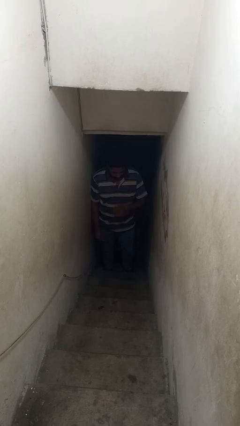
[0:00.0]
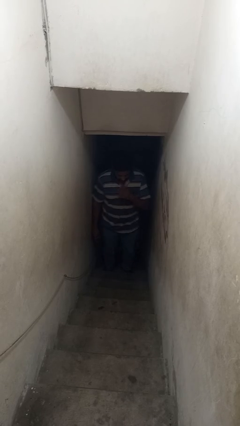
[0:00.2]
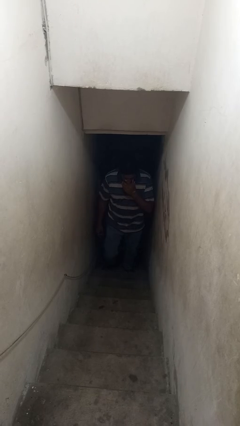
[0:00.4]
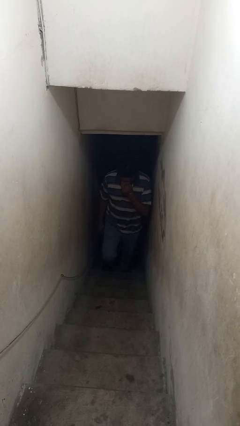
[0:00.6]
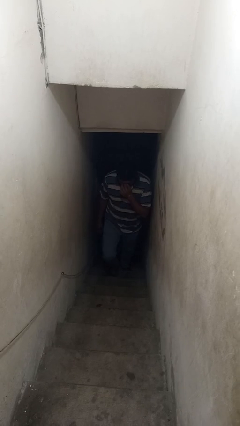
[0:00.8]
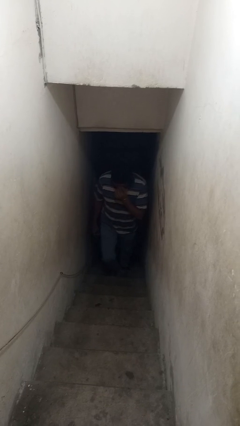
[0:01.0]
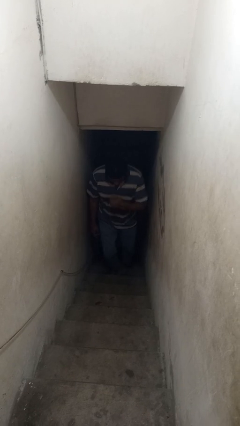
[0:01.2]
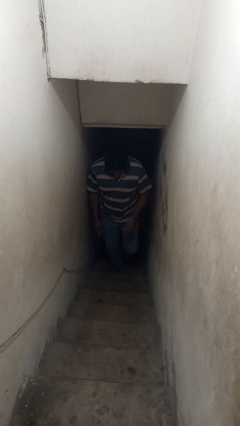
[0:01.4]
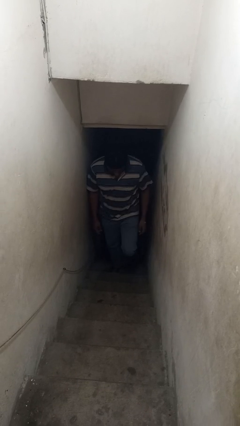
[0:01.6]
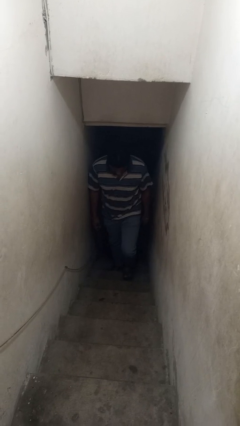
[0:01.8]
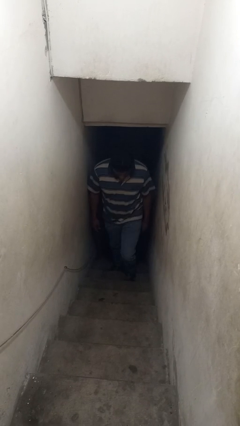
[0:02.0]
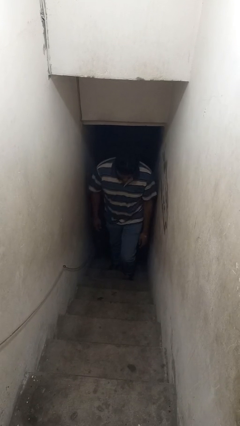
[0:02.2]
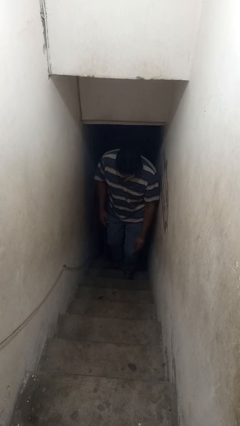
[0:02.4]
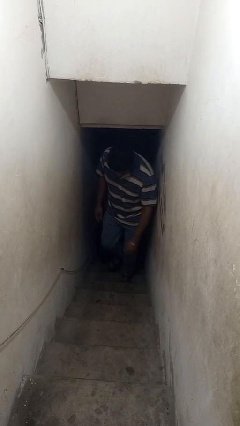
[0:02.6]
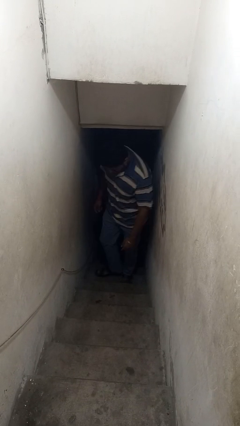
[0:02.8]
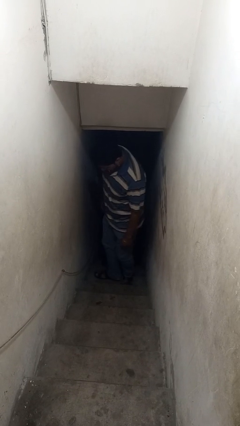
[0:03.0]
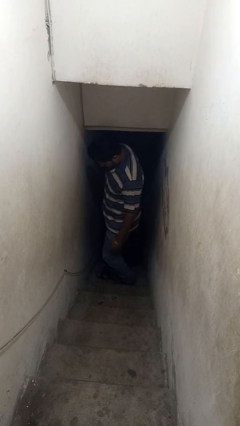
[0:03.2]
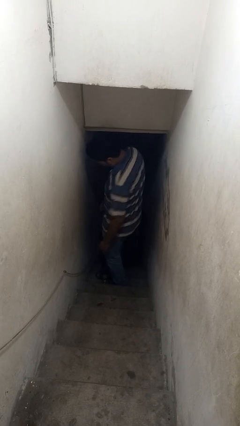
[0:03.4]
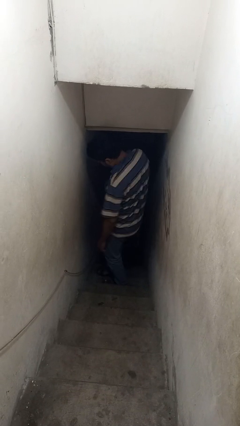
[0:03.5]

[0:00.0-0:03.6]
person climbs up stairs

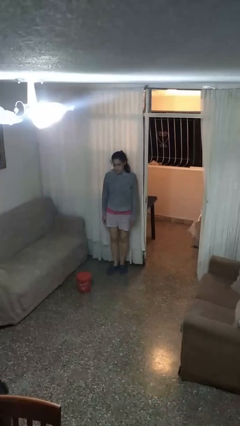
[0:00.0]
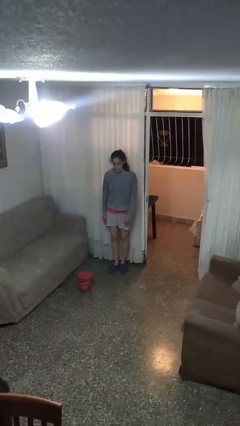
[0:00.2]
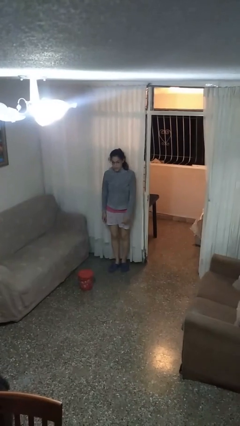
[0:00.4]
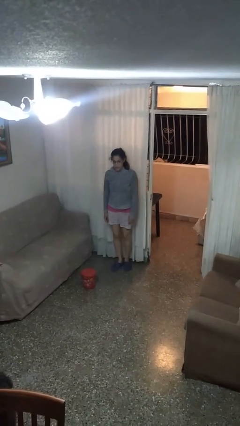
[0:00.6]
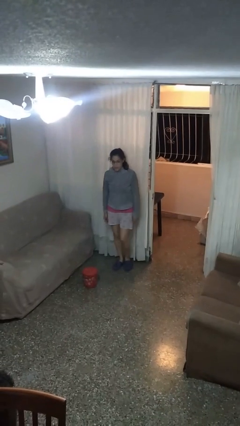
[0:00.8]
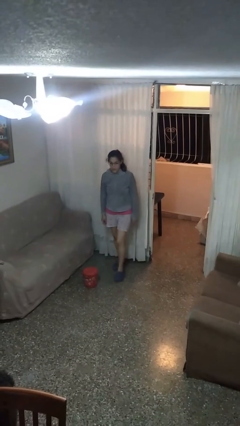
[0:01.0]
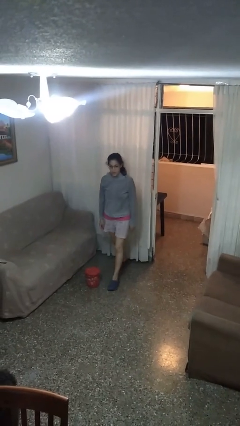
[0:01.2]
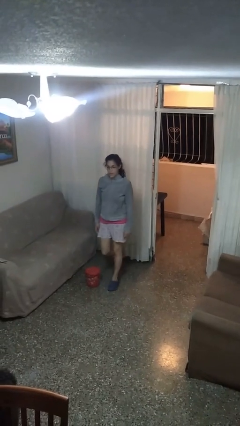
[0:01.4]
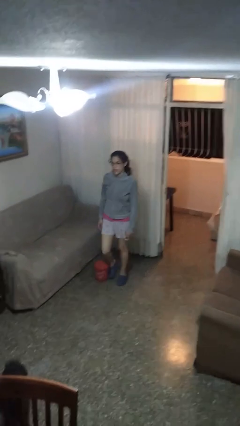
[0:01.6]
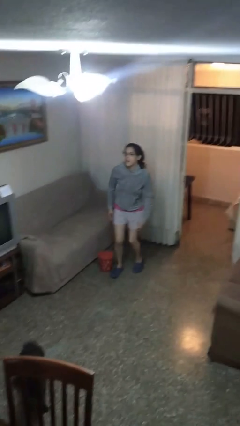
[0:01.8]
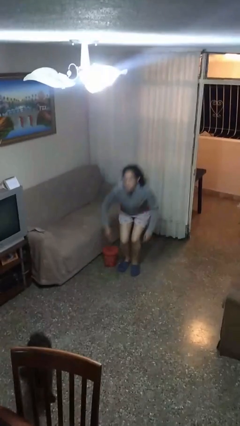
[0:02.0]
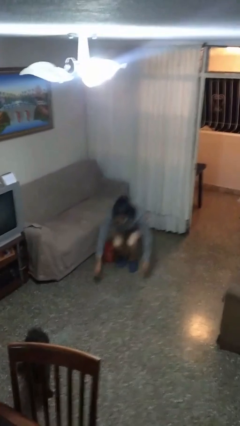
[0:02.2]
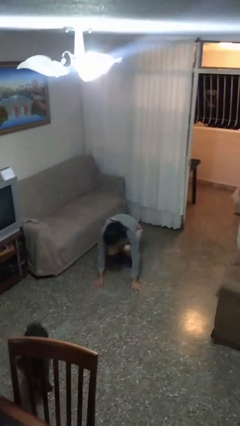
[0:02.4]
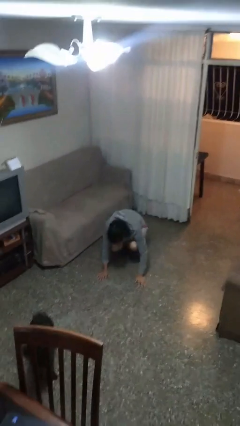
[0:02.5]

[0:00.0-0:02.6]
person trips on object on floor

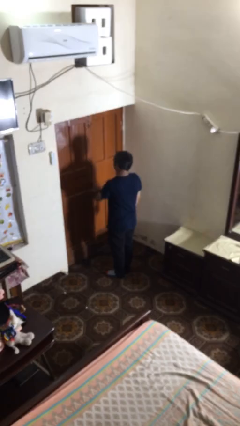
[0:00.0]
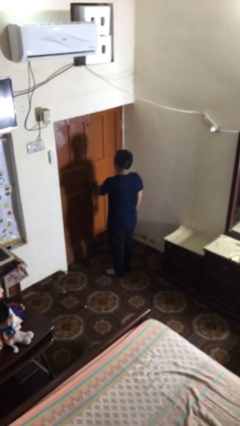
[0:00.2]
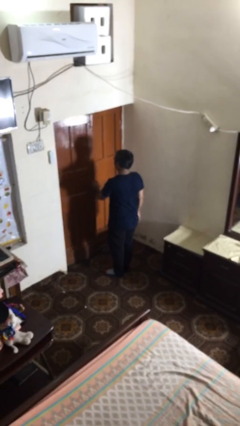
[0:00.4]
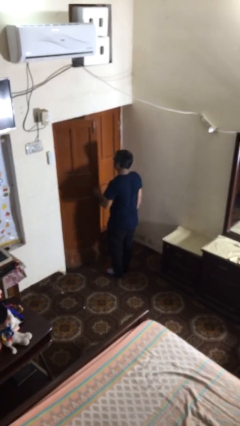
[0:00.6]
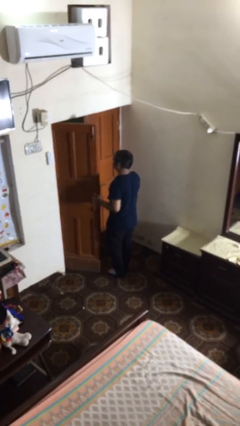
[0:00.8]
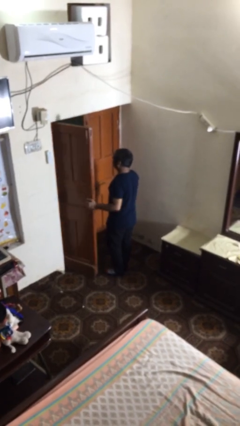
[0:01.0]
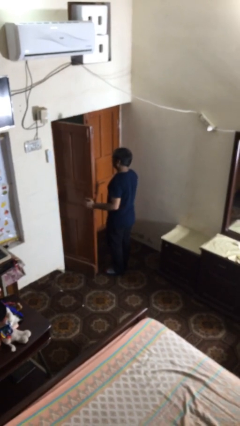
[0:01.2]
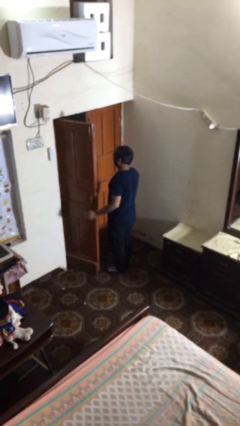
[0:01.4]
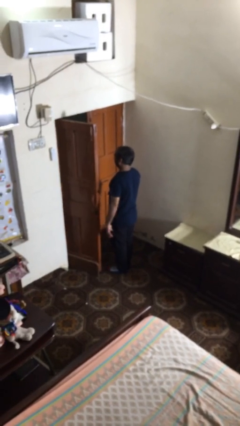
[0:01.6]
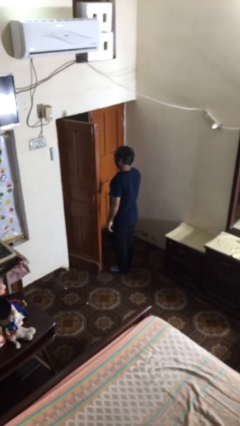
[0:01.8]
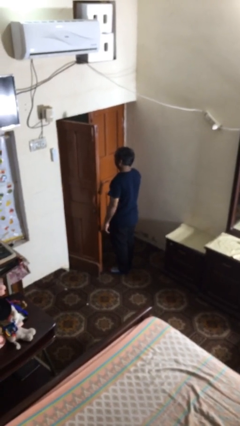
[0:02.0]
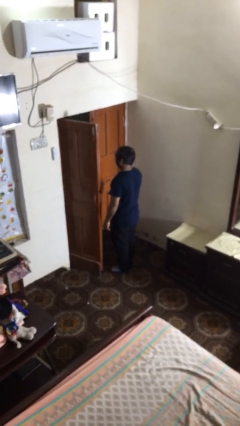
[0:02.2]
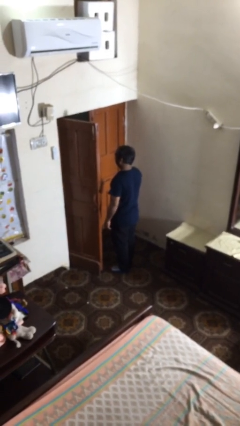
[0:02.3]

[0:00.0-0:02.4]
person opens facility door

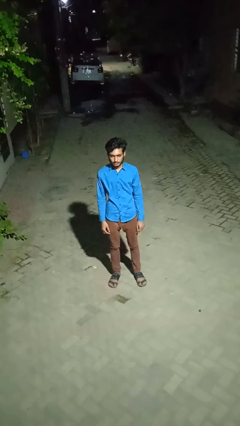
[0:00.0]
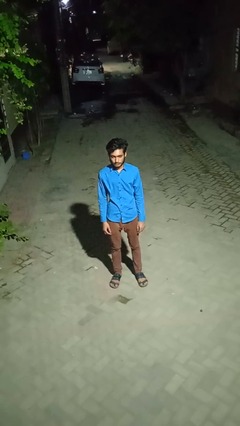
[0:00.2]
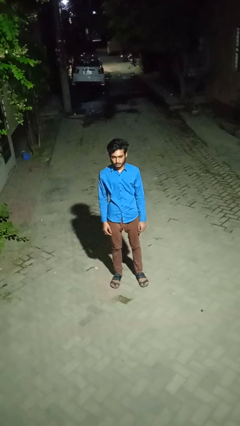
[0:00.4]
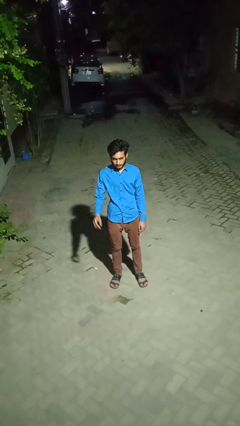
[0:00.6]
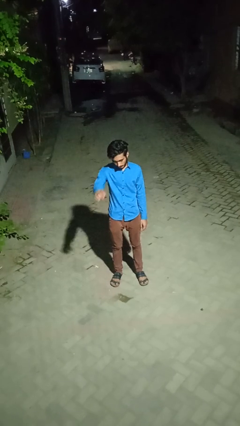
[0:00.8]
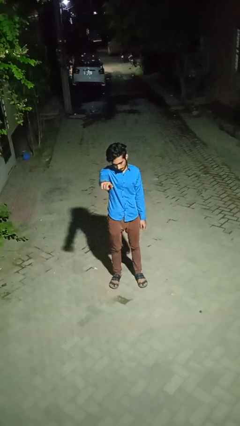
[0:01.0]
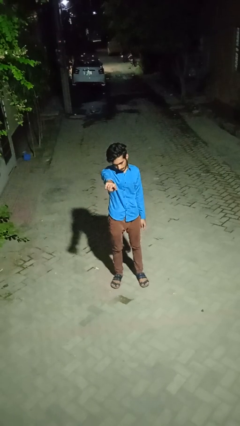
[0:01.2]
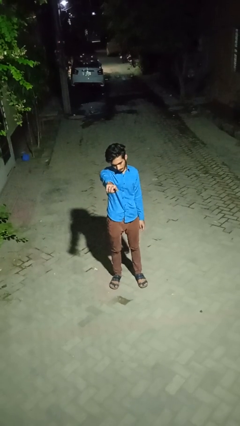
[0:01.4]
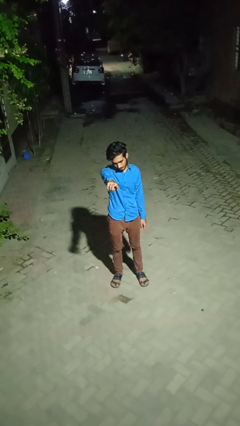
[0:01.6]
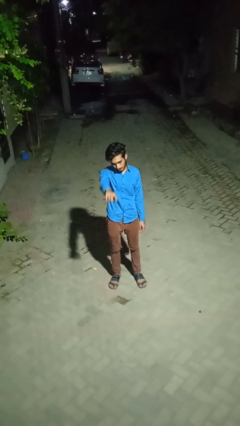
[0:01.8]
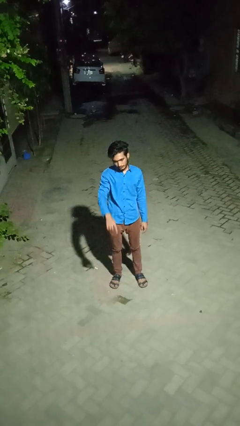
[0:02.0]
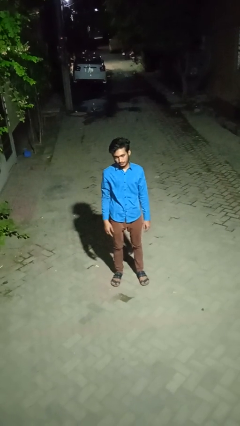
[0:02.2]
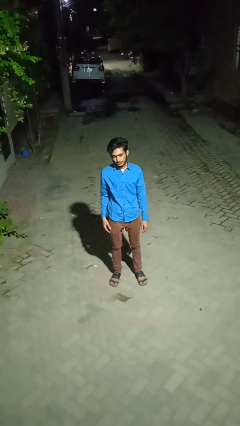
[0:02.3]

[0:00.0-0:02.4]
person points at person

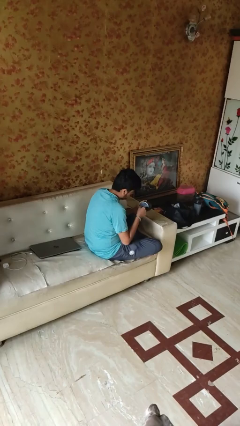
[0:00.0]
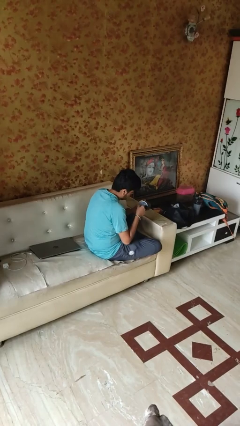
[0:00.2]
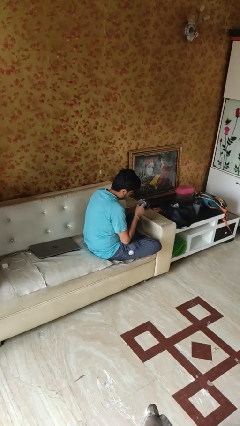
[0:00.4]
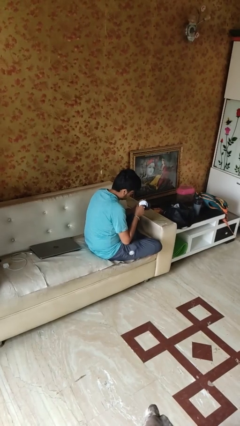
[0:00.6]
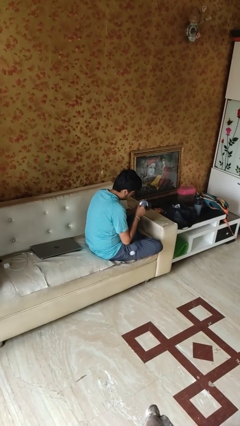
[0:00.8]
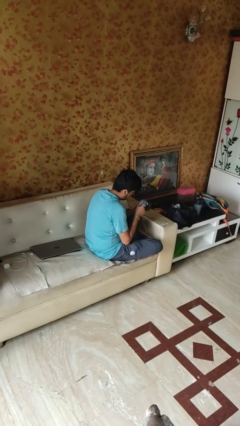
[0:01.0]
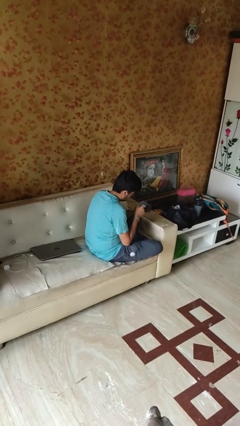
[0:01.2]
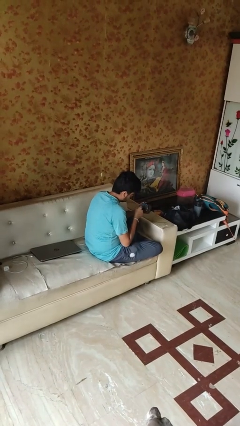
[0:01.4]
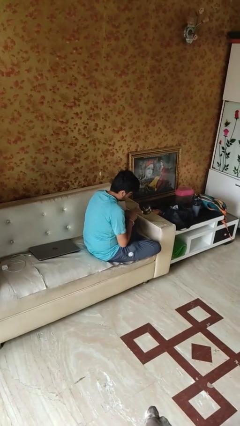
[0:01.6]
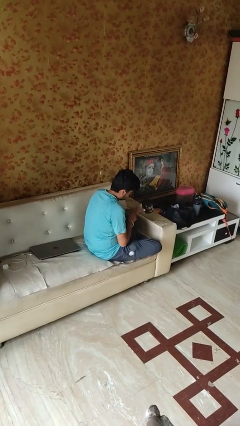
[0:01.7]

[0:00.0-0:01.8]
person taps object with finger

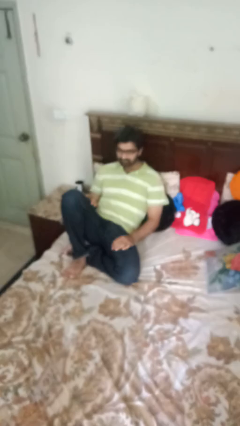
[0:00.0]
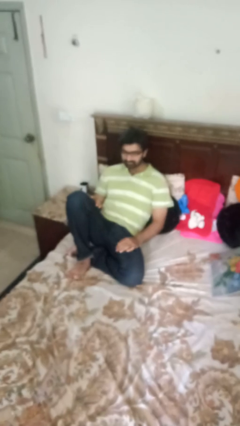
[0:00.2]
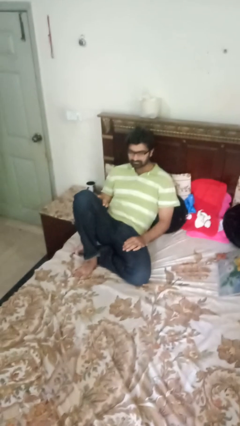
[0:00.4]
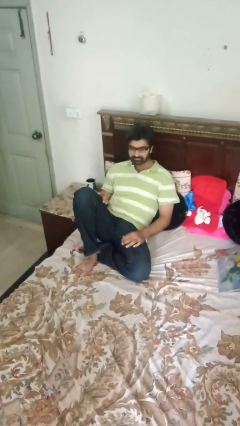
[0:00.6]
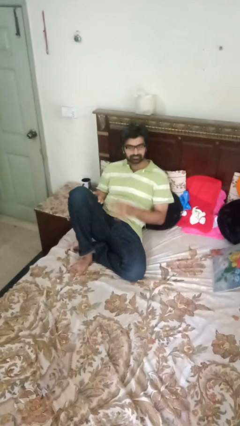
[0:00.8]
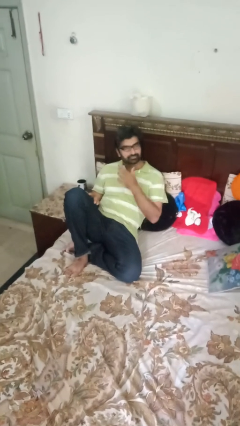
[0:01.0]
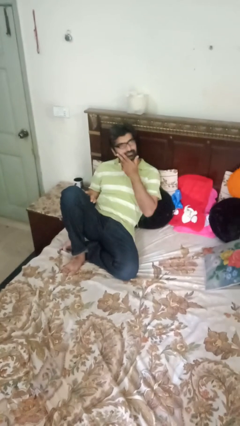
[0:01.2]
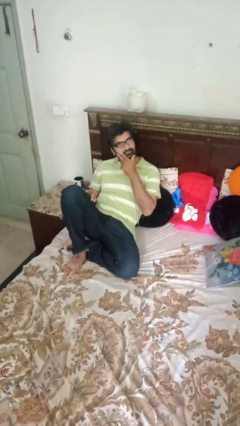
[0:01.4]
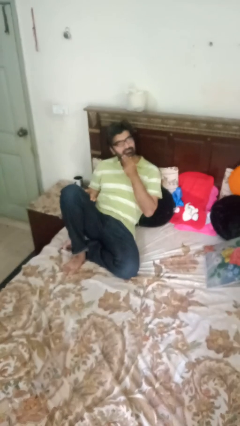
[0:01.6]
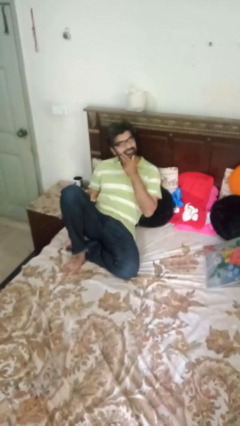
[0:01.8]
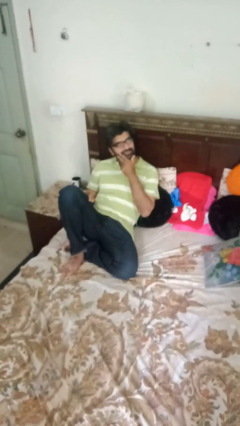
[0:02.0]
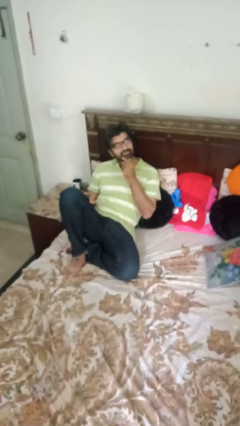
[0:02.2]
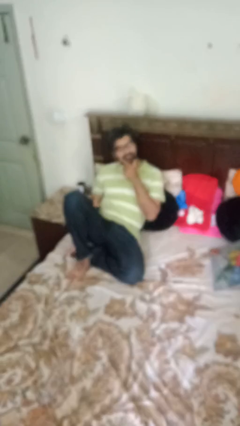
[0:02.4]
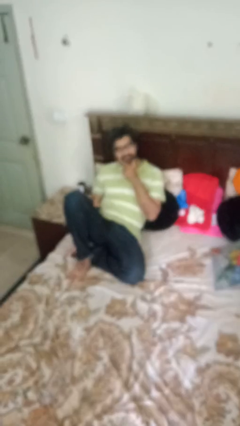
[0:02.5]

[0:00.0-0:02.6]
person strokes chin

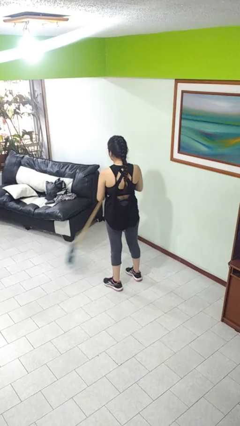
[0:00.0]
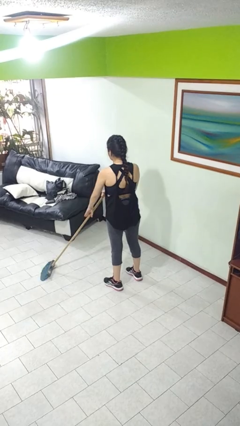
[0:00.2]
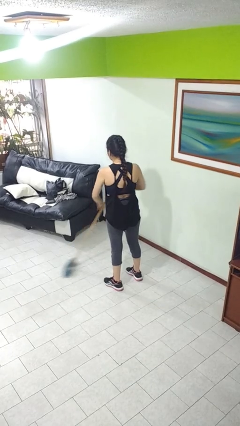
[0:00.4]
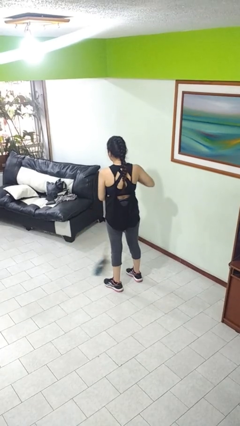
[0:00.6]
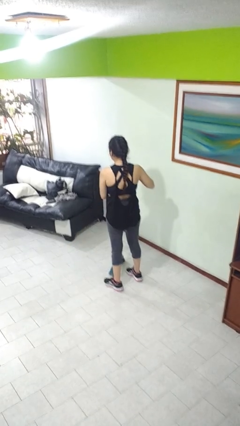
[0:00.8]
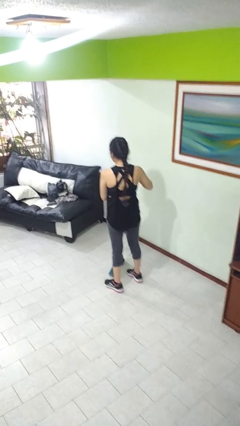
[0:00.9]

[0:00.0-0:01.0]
person sweeps floor

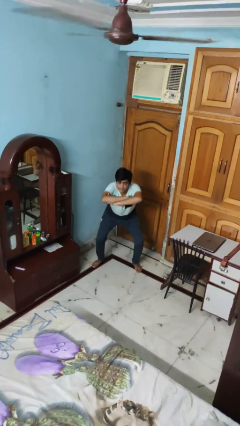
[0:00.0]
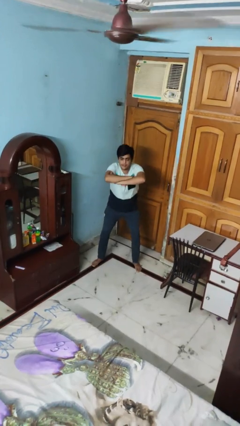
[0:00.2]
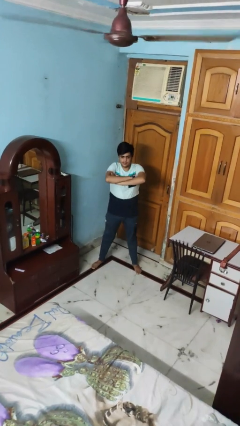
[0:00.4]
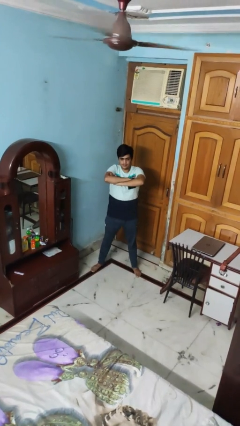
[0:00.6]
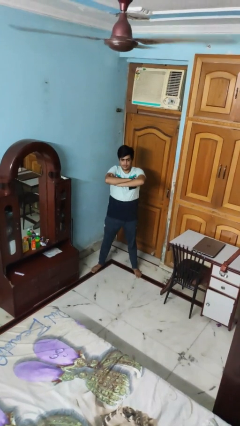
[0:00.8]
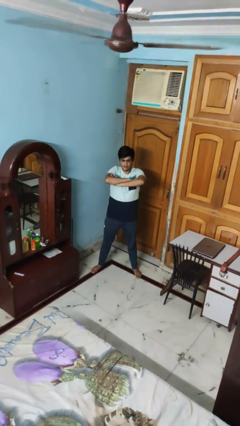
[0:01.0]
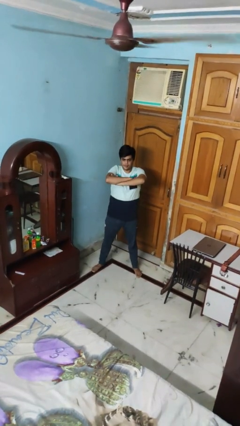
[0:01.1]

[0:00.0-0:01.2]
person stands up
